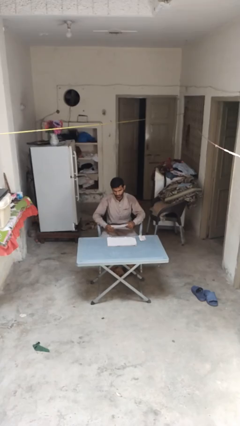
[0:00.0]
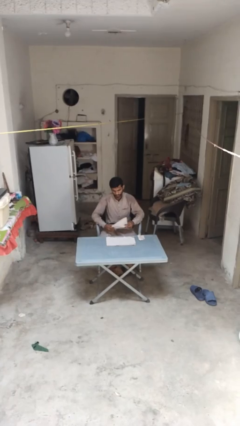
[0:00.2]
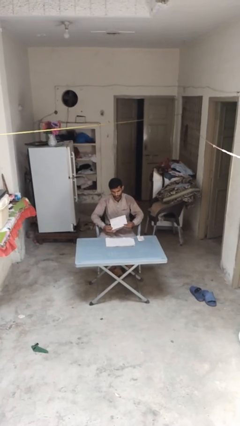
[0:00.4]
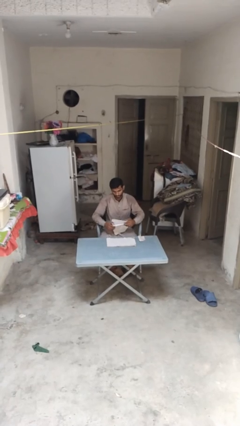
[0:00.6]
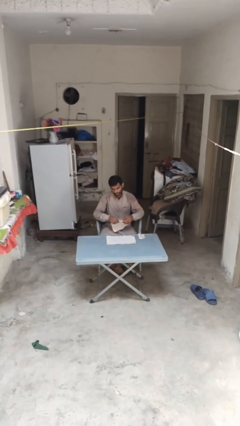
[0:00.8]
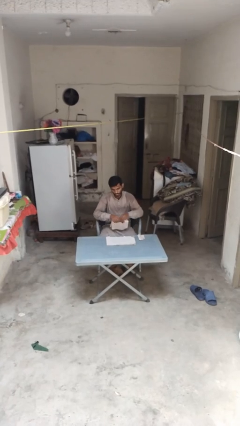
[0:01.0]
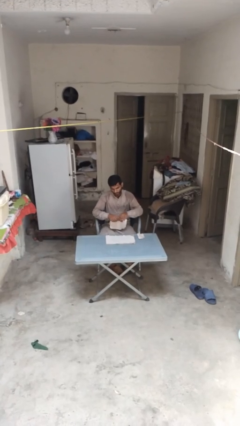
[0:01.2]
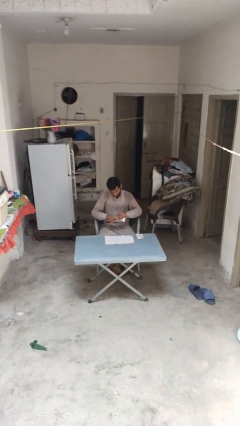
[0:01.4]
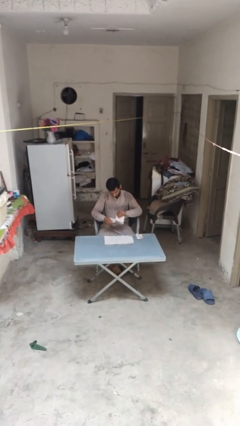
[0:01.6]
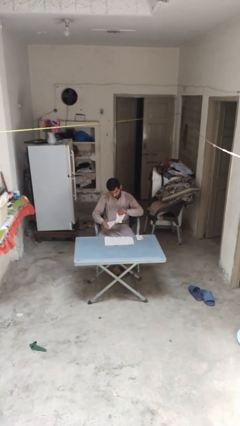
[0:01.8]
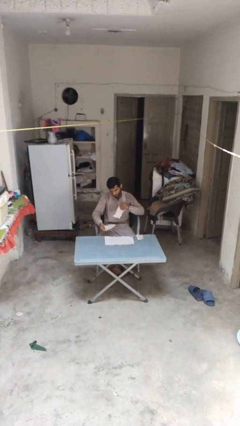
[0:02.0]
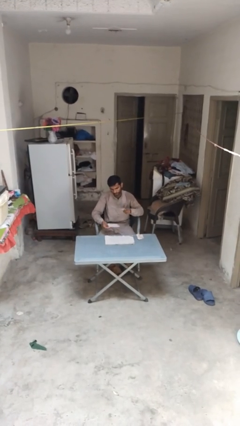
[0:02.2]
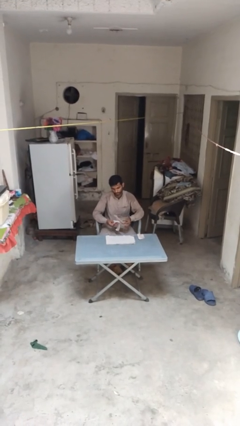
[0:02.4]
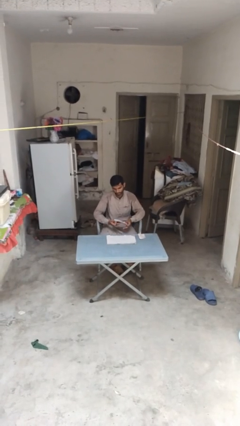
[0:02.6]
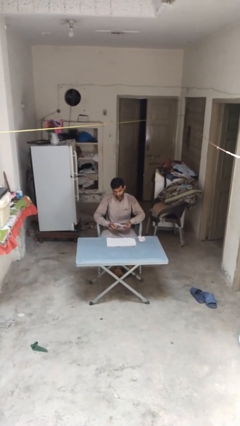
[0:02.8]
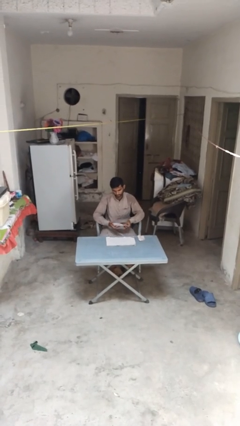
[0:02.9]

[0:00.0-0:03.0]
person tears paper

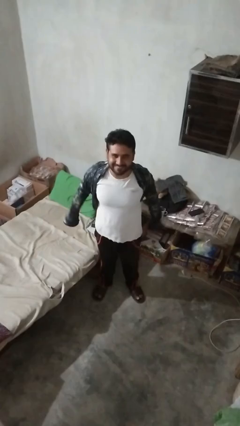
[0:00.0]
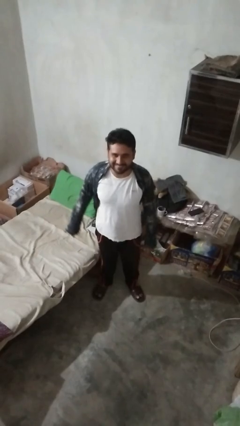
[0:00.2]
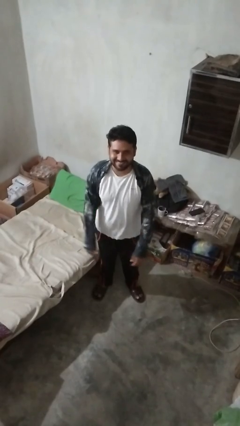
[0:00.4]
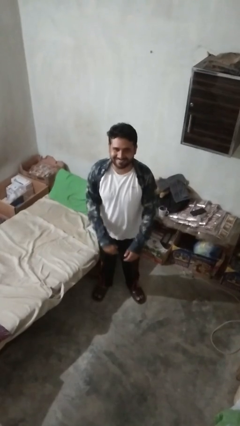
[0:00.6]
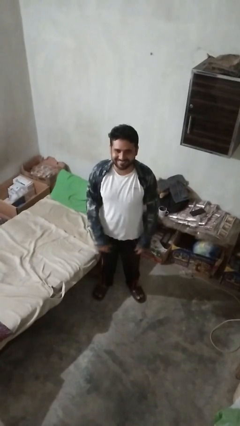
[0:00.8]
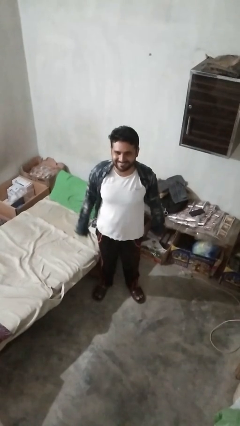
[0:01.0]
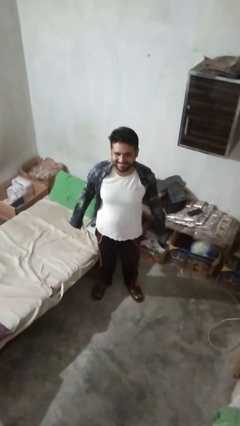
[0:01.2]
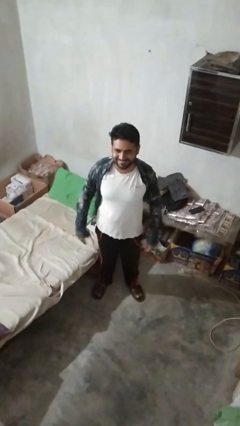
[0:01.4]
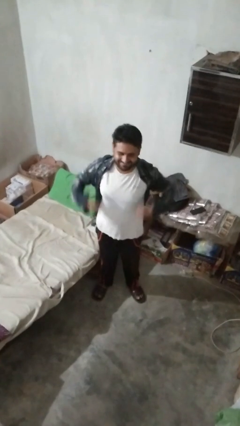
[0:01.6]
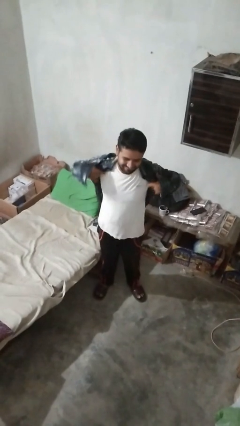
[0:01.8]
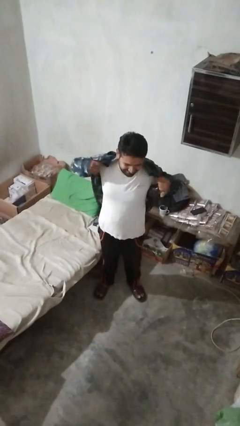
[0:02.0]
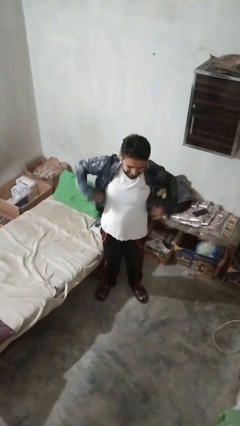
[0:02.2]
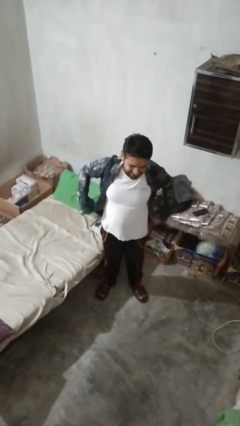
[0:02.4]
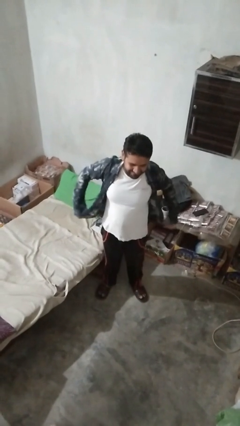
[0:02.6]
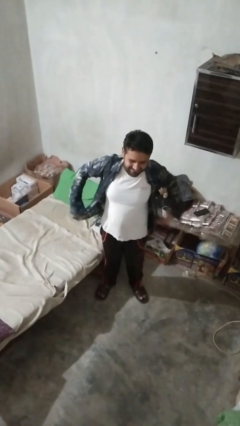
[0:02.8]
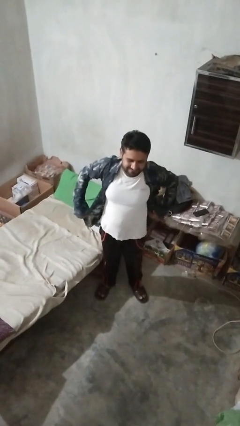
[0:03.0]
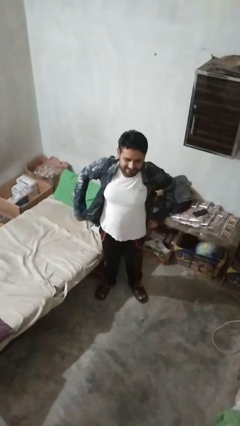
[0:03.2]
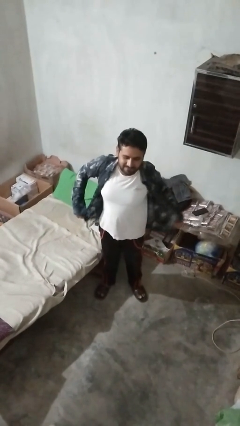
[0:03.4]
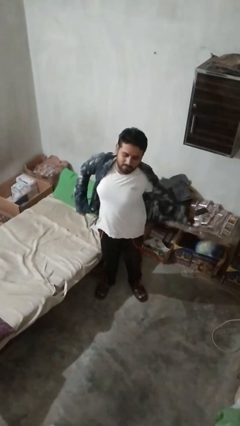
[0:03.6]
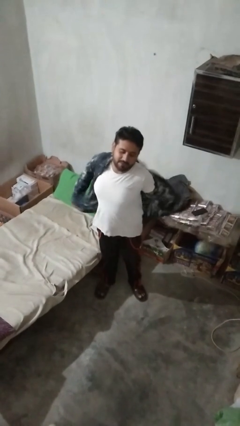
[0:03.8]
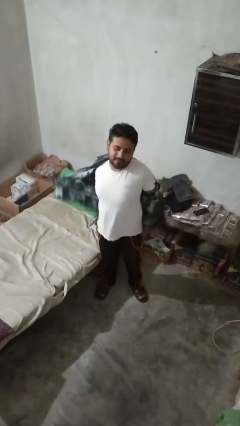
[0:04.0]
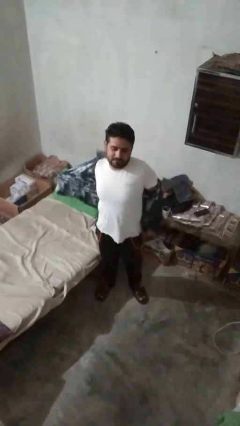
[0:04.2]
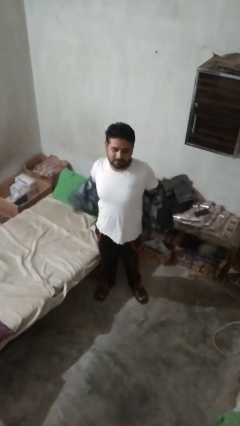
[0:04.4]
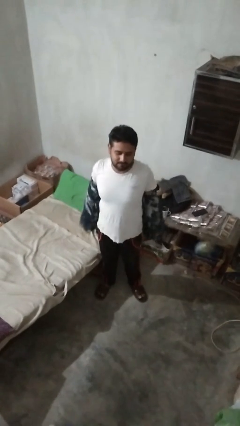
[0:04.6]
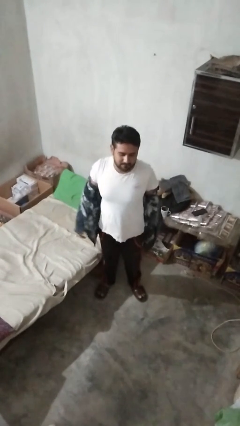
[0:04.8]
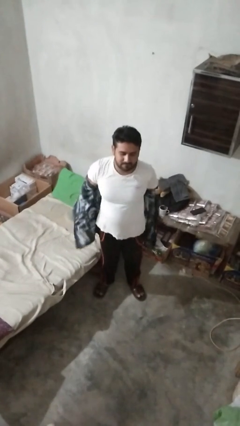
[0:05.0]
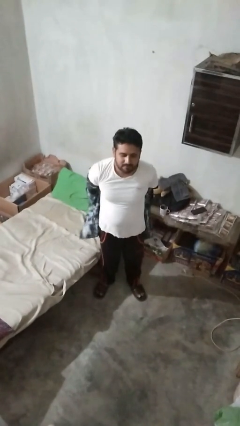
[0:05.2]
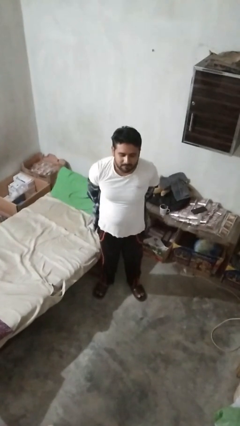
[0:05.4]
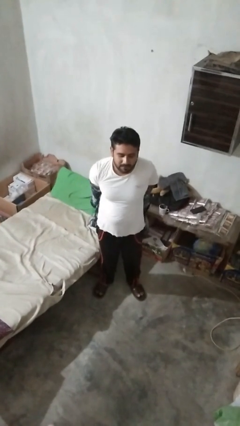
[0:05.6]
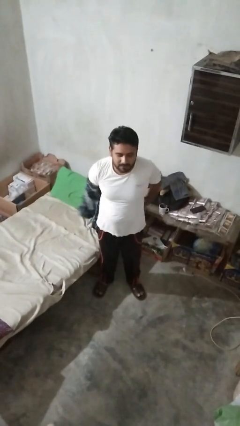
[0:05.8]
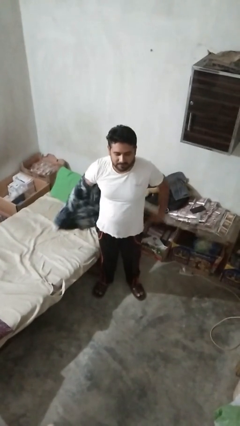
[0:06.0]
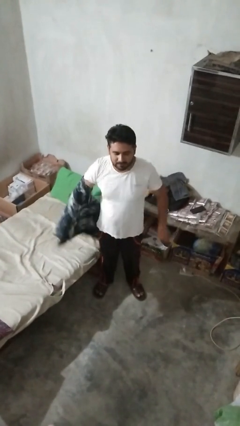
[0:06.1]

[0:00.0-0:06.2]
person takes off shirt

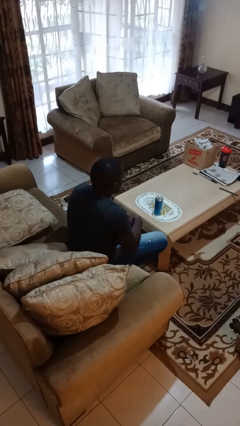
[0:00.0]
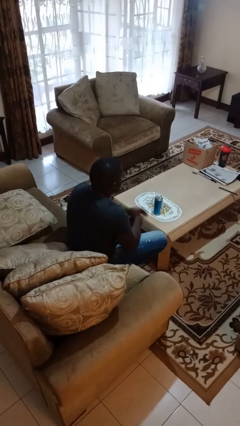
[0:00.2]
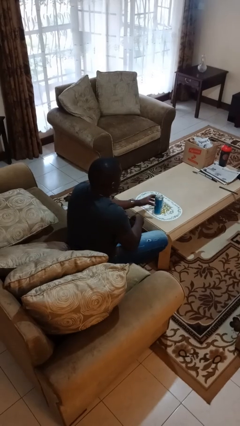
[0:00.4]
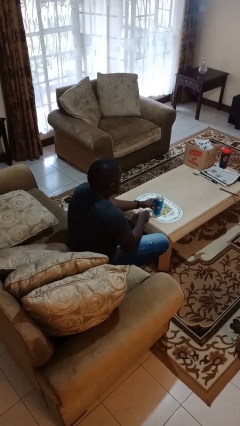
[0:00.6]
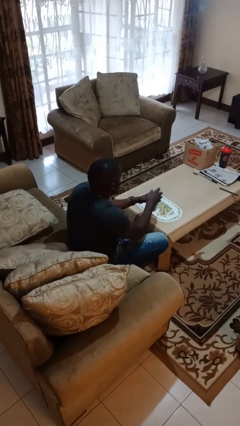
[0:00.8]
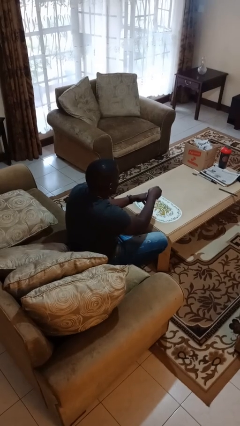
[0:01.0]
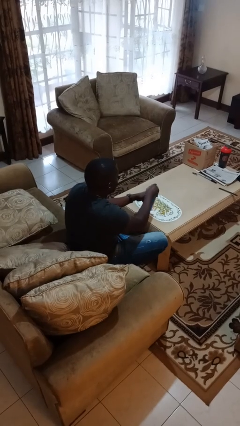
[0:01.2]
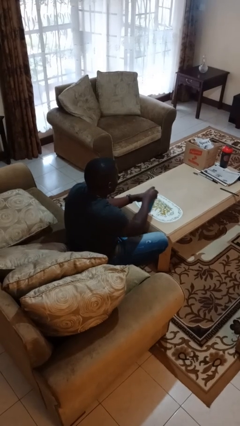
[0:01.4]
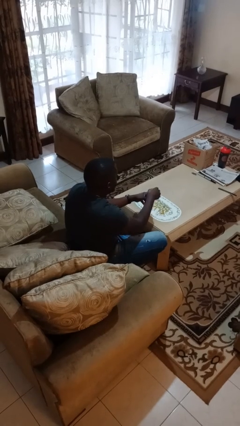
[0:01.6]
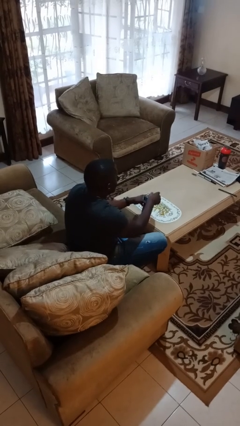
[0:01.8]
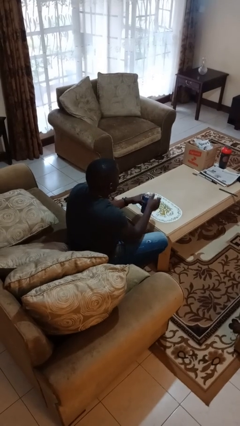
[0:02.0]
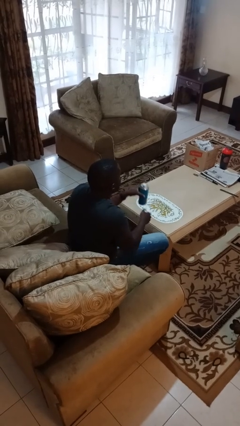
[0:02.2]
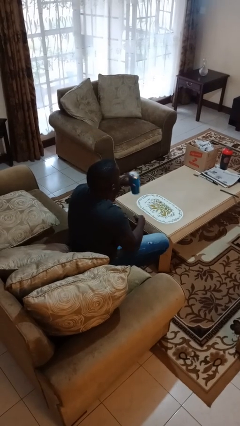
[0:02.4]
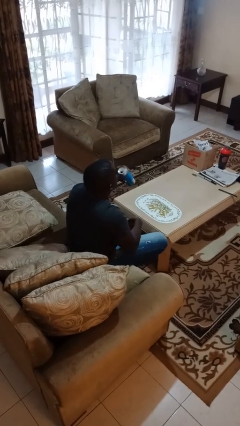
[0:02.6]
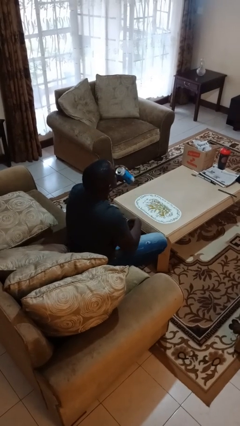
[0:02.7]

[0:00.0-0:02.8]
person opens beverage can

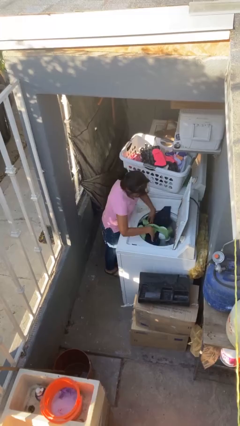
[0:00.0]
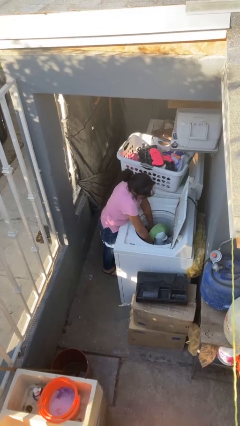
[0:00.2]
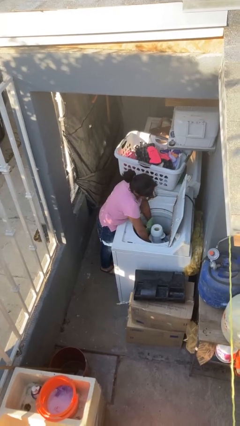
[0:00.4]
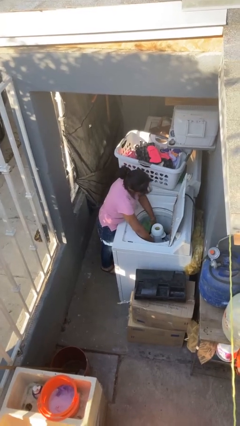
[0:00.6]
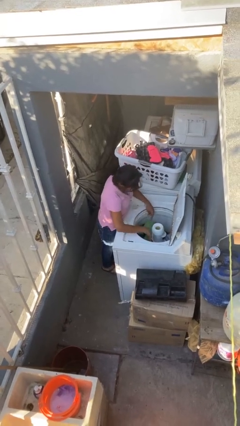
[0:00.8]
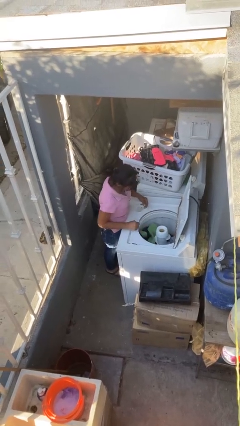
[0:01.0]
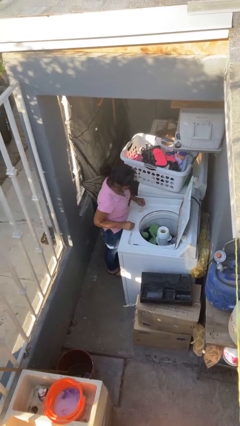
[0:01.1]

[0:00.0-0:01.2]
person unloads clotheswasher

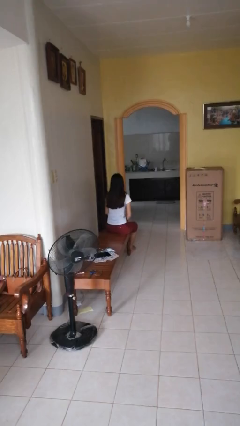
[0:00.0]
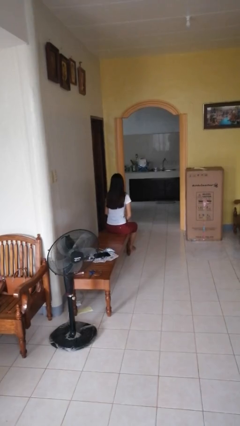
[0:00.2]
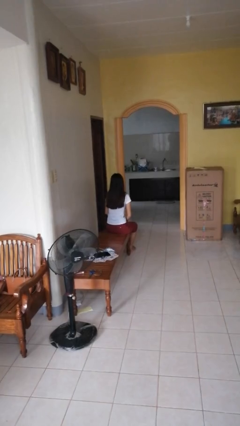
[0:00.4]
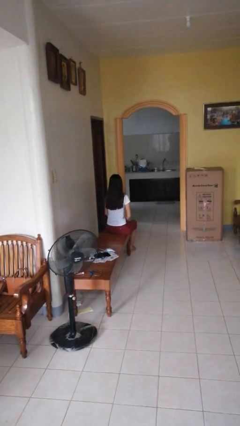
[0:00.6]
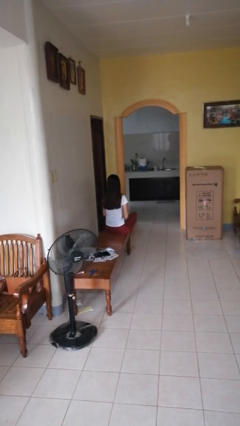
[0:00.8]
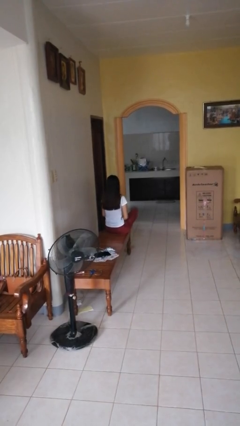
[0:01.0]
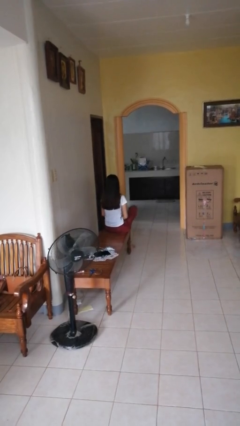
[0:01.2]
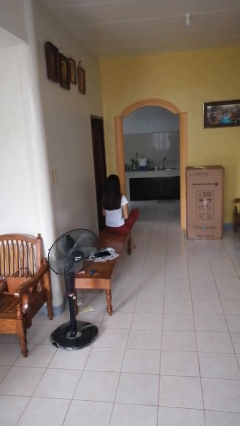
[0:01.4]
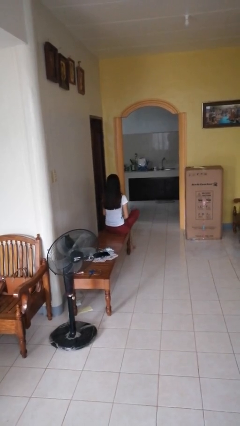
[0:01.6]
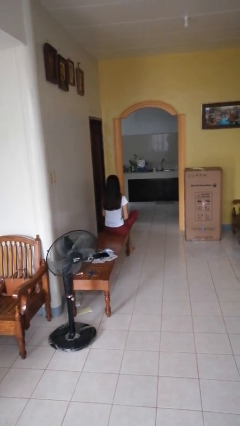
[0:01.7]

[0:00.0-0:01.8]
person crosses legs

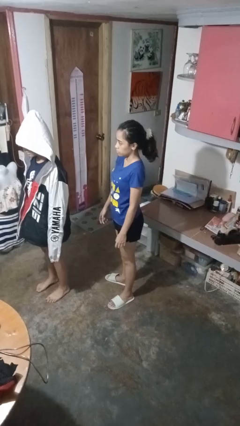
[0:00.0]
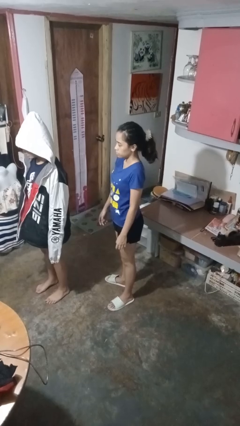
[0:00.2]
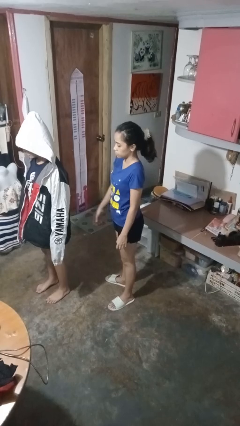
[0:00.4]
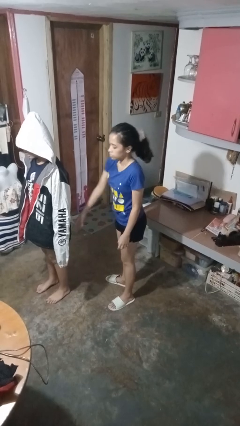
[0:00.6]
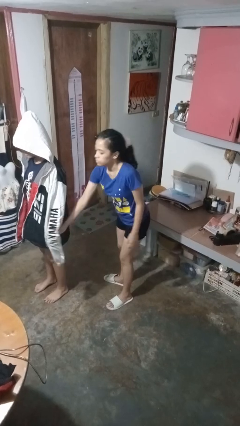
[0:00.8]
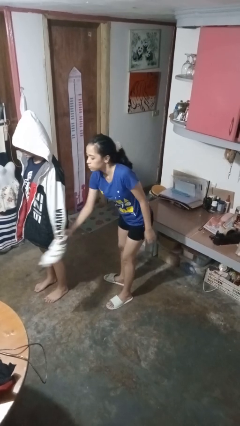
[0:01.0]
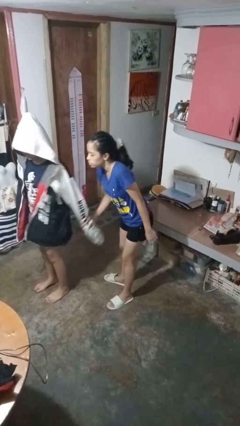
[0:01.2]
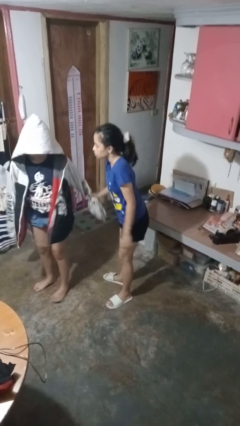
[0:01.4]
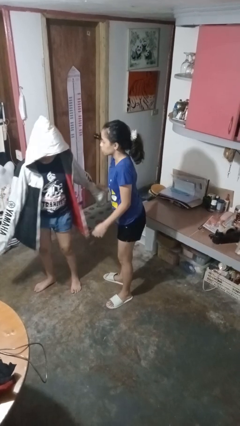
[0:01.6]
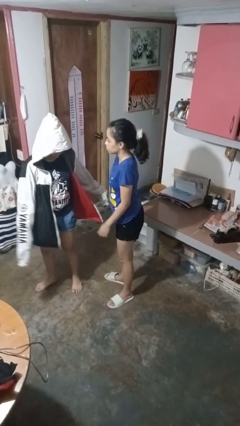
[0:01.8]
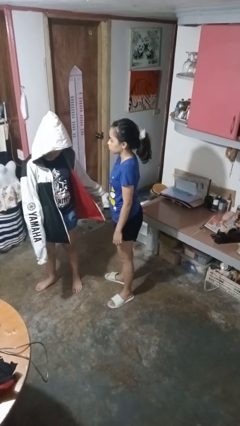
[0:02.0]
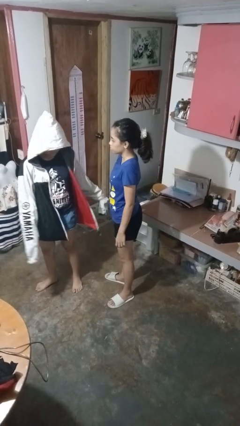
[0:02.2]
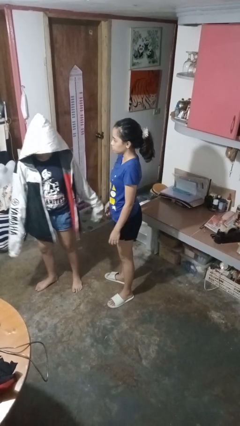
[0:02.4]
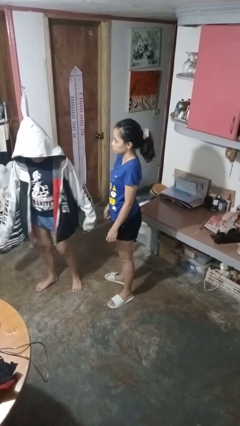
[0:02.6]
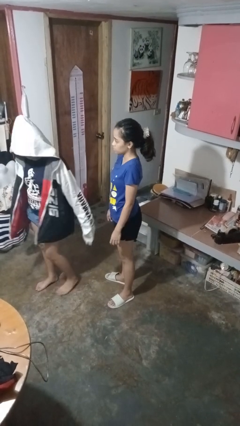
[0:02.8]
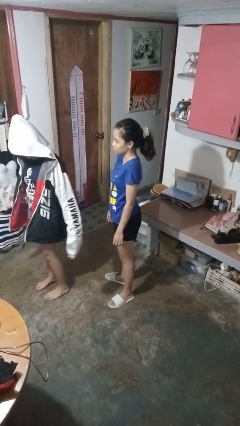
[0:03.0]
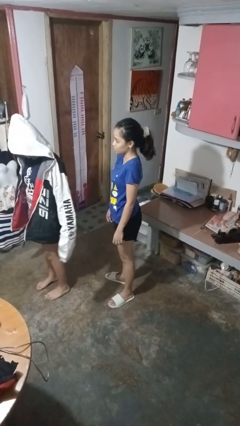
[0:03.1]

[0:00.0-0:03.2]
person grabs person by forearm
